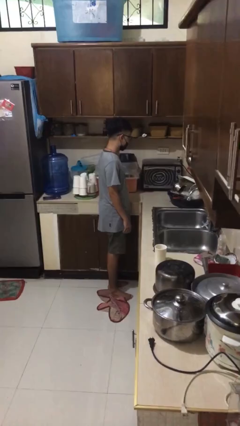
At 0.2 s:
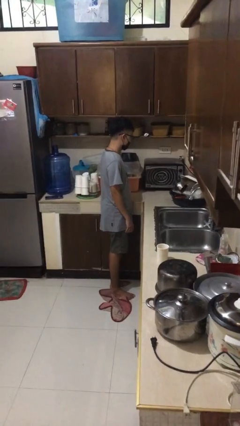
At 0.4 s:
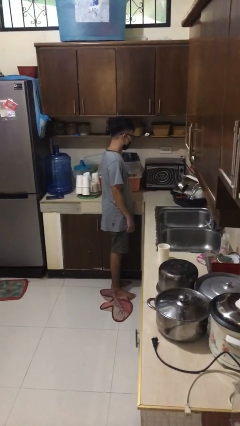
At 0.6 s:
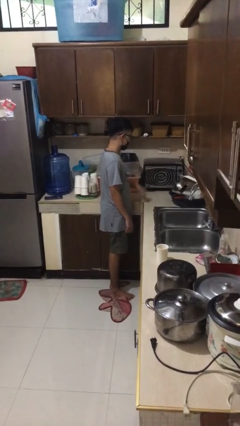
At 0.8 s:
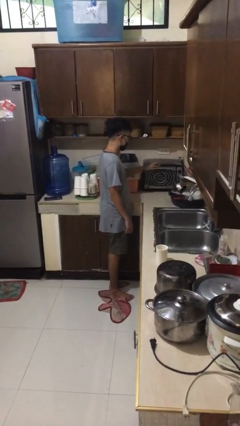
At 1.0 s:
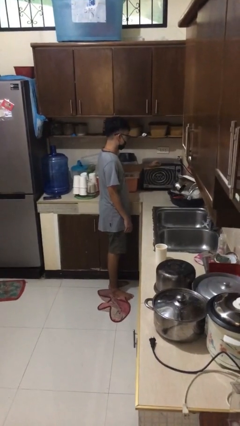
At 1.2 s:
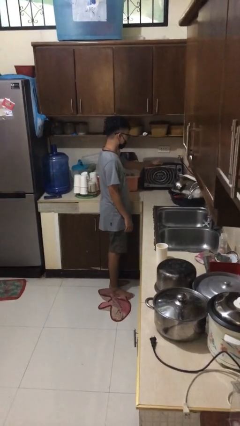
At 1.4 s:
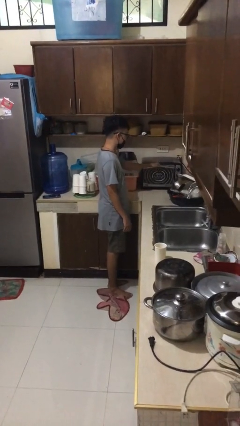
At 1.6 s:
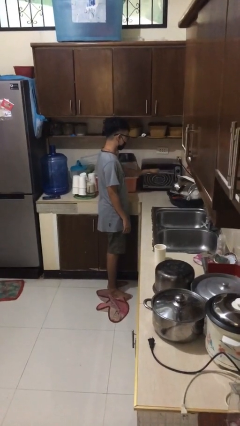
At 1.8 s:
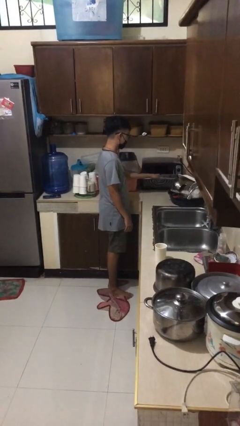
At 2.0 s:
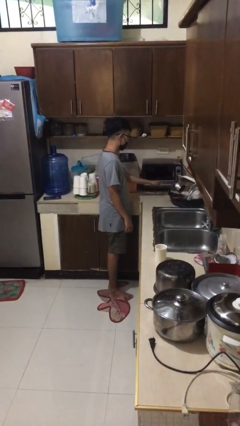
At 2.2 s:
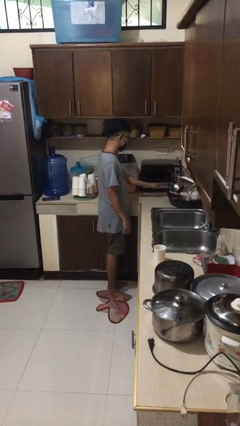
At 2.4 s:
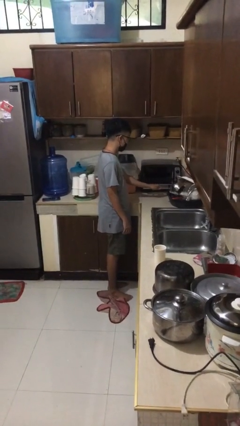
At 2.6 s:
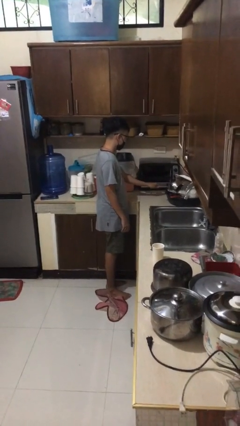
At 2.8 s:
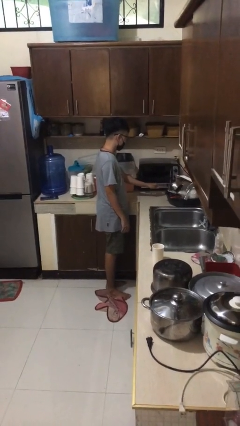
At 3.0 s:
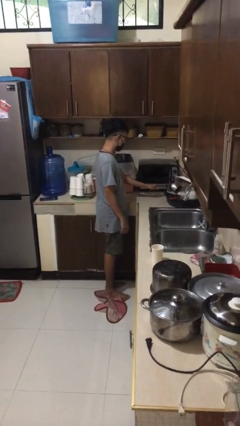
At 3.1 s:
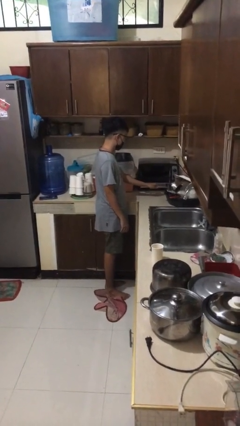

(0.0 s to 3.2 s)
person opens microwave

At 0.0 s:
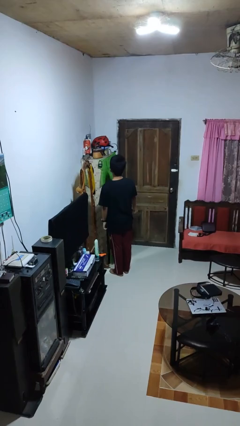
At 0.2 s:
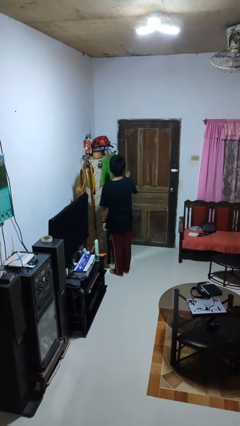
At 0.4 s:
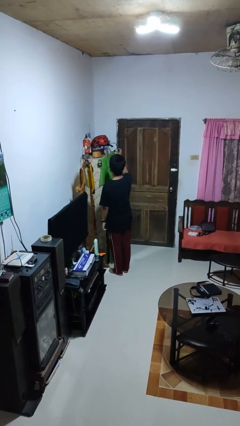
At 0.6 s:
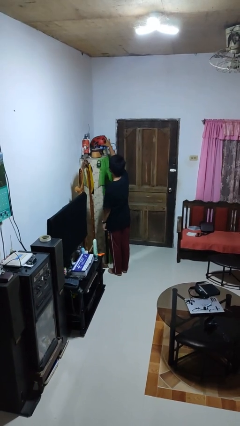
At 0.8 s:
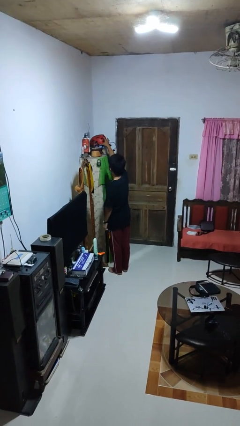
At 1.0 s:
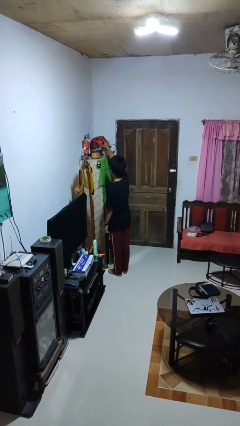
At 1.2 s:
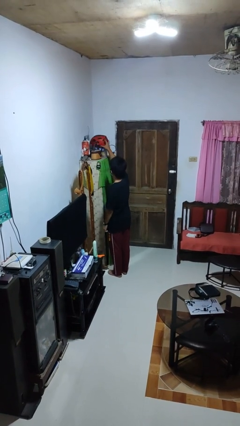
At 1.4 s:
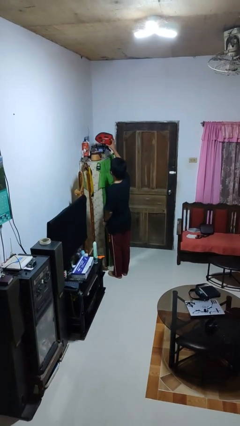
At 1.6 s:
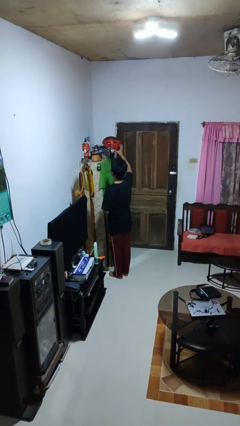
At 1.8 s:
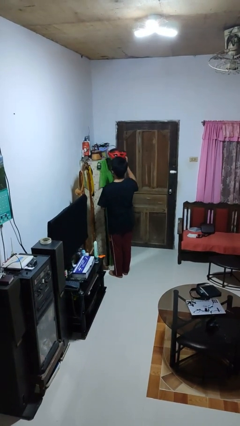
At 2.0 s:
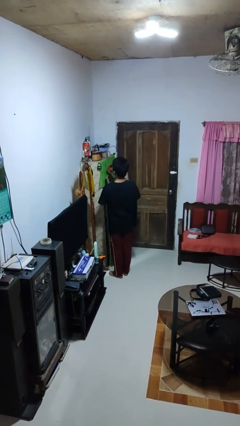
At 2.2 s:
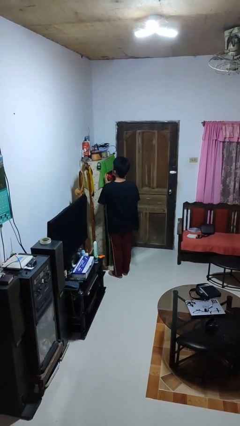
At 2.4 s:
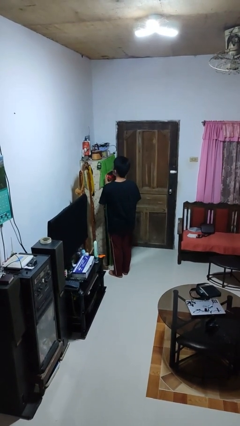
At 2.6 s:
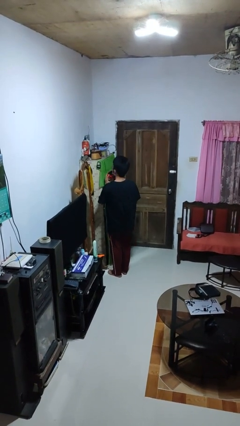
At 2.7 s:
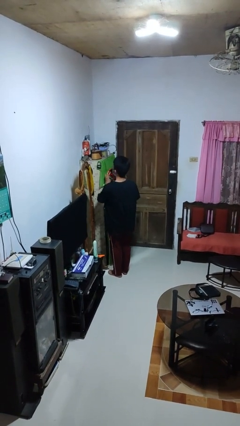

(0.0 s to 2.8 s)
person picks up object from shelf

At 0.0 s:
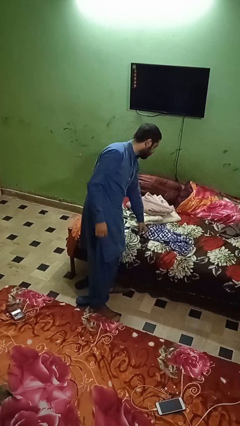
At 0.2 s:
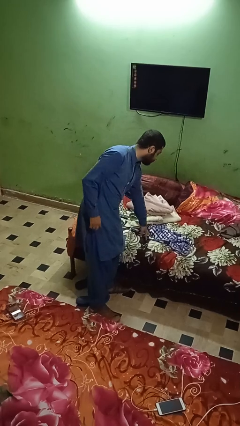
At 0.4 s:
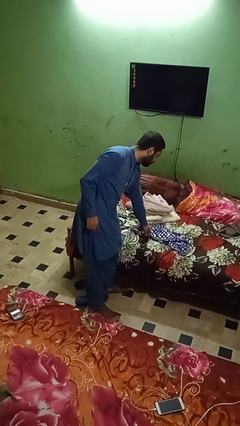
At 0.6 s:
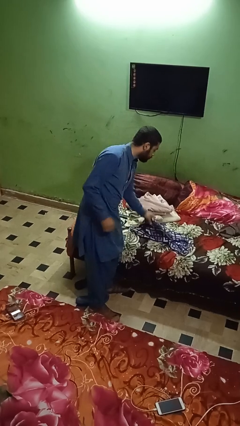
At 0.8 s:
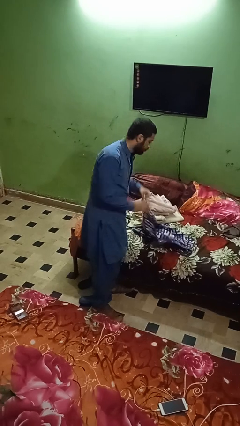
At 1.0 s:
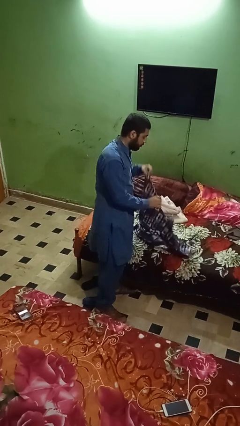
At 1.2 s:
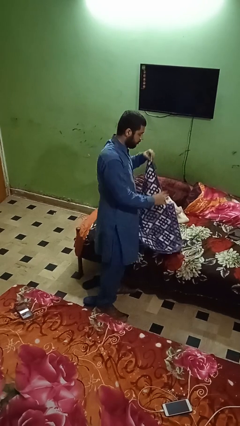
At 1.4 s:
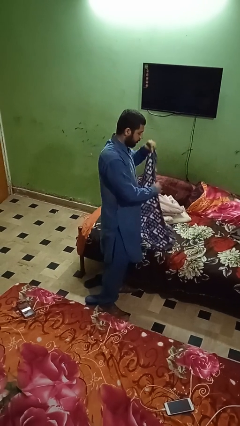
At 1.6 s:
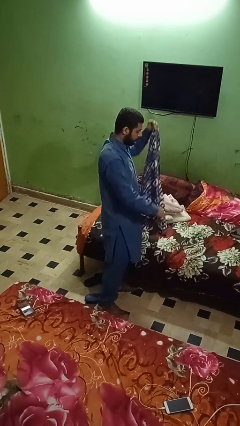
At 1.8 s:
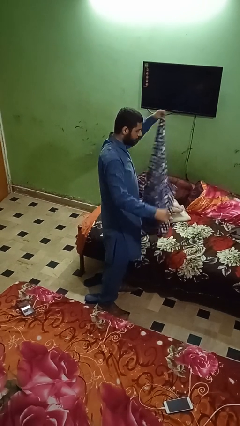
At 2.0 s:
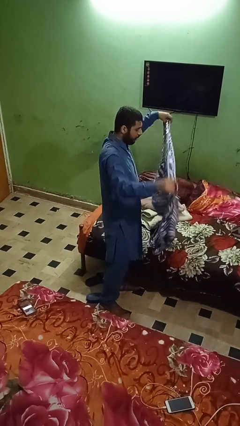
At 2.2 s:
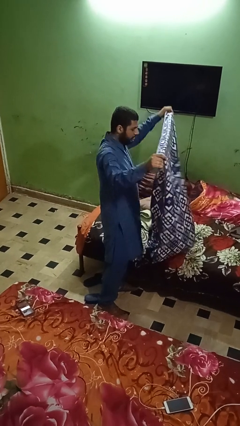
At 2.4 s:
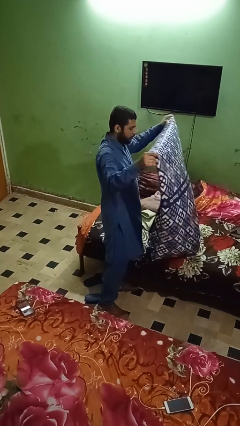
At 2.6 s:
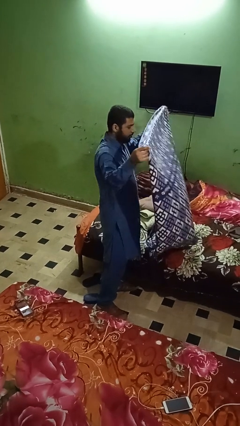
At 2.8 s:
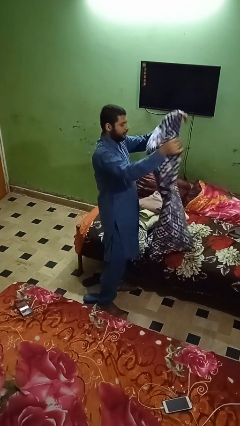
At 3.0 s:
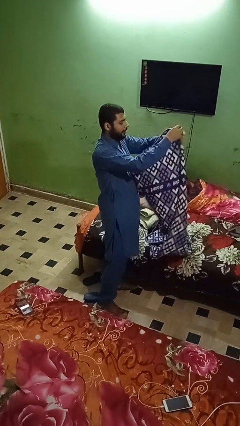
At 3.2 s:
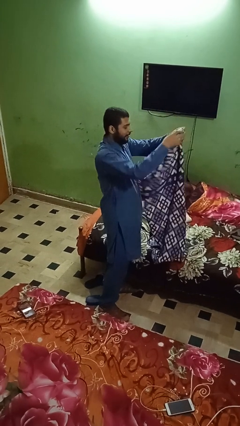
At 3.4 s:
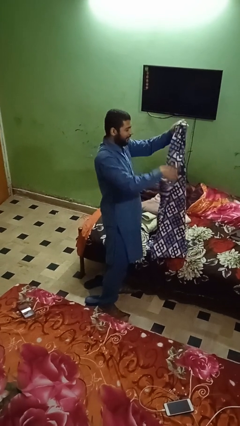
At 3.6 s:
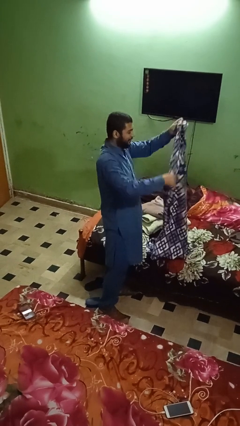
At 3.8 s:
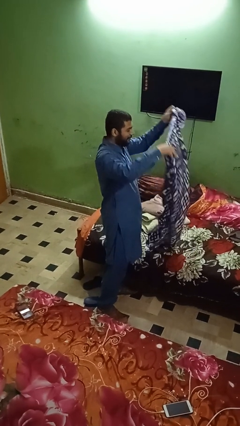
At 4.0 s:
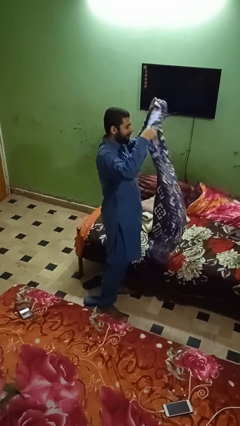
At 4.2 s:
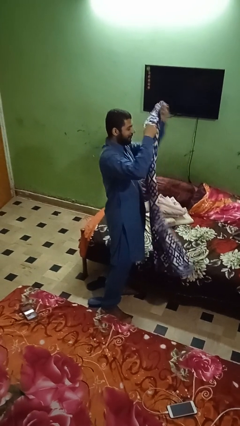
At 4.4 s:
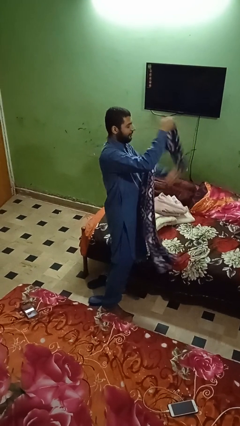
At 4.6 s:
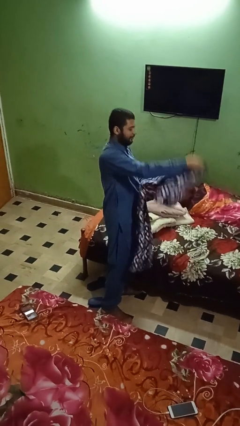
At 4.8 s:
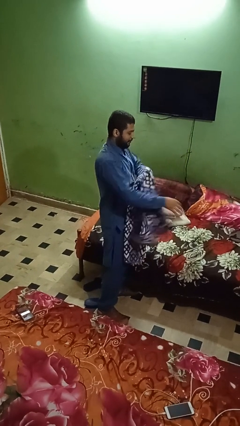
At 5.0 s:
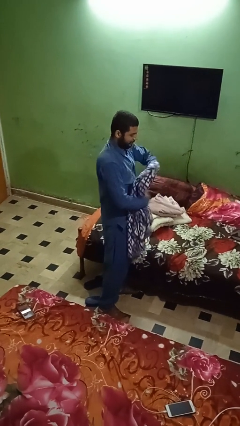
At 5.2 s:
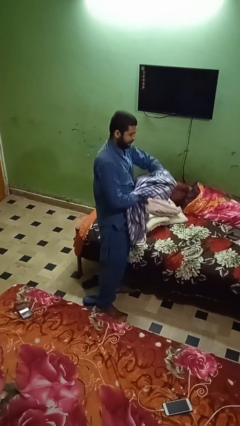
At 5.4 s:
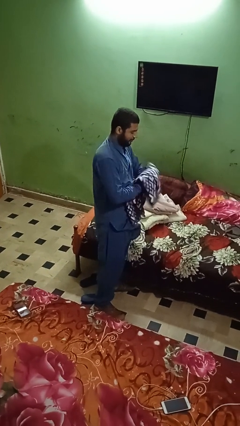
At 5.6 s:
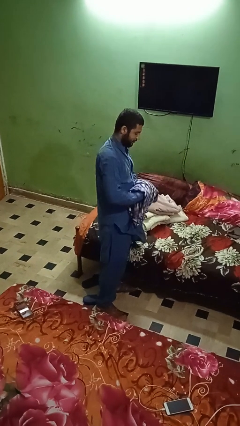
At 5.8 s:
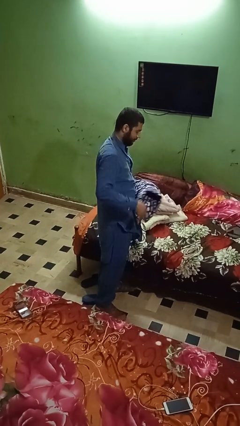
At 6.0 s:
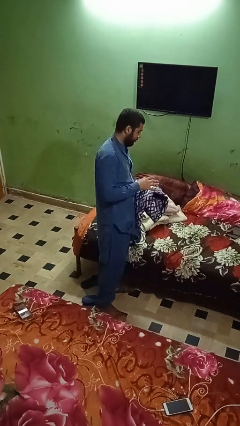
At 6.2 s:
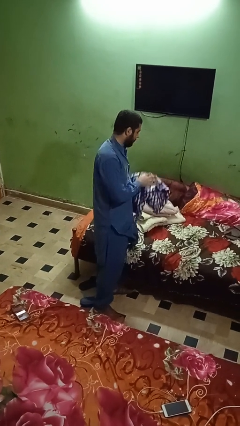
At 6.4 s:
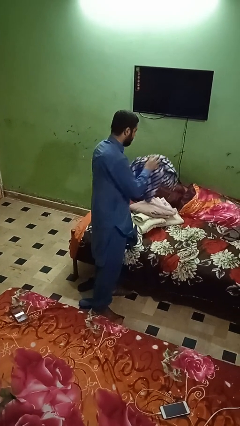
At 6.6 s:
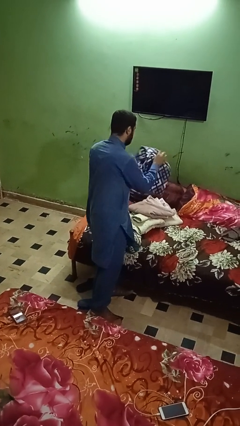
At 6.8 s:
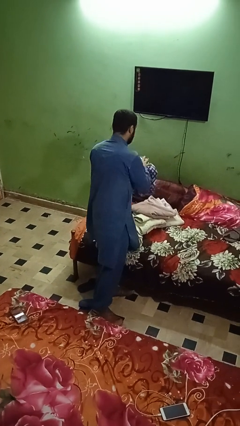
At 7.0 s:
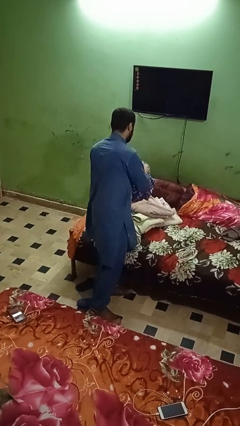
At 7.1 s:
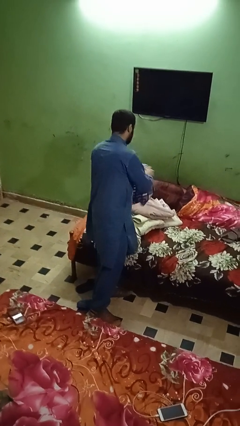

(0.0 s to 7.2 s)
person folds towel

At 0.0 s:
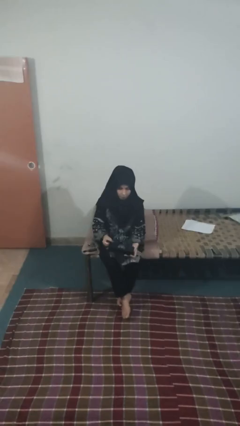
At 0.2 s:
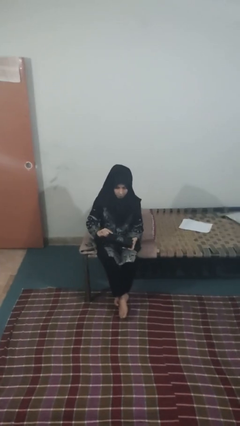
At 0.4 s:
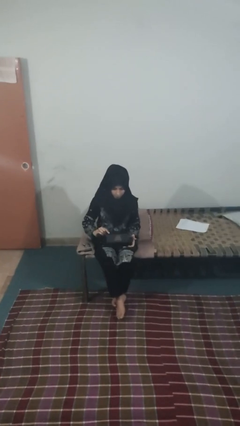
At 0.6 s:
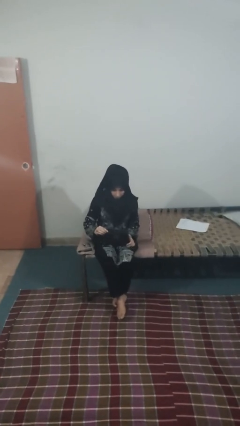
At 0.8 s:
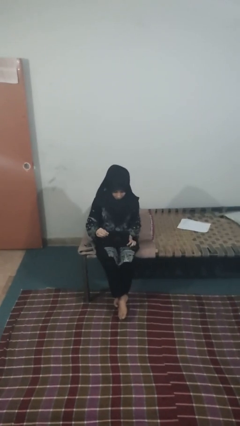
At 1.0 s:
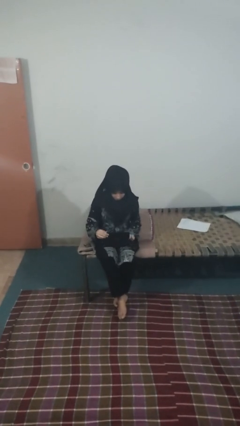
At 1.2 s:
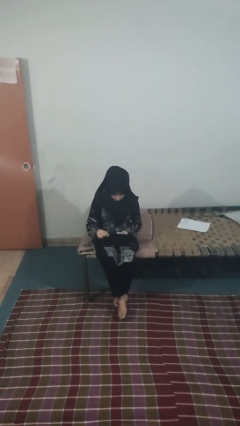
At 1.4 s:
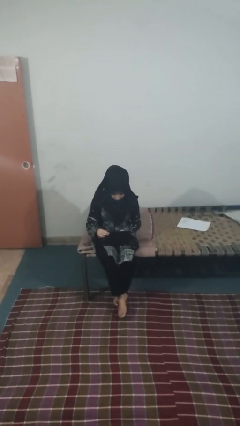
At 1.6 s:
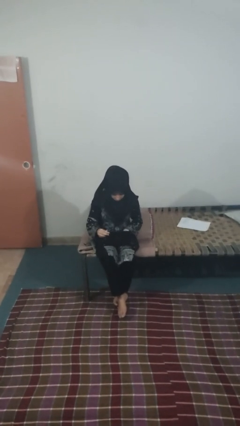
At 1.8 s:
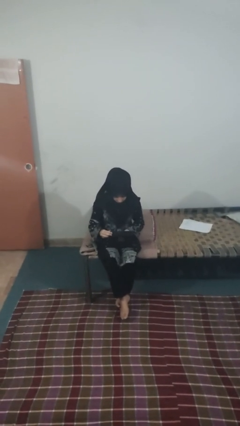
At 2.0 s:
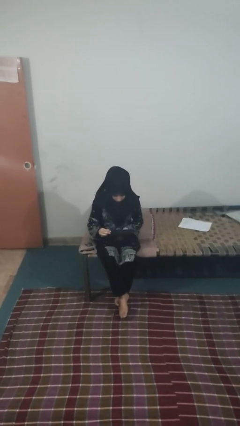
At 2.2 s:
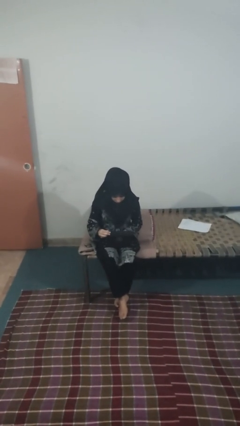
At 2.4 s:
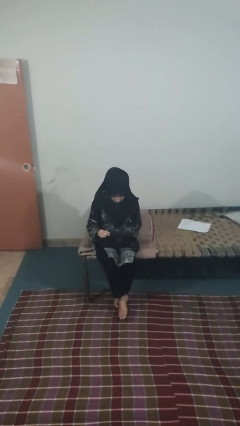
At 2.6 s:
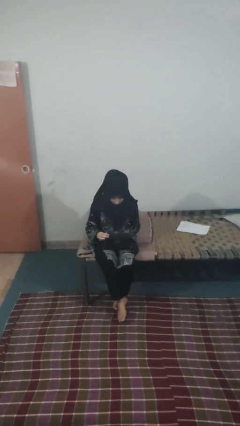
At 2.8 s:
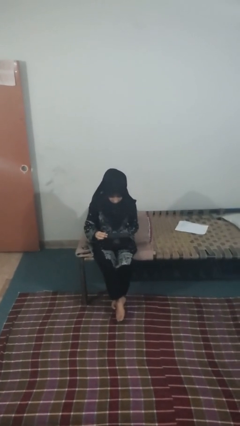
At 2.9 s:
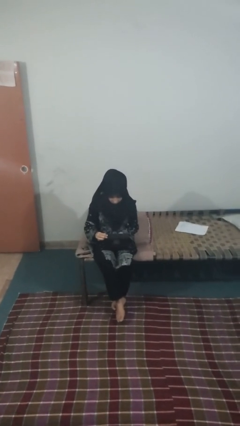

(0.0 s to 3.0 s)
person opens jewelry box

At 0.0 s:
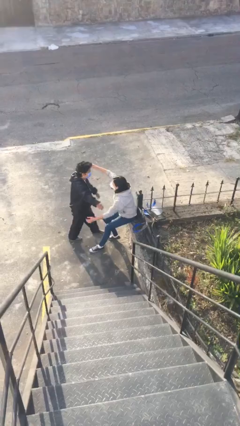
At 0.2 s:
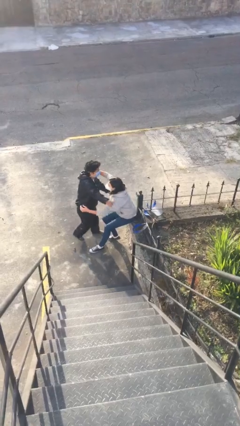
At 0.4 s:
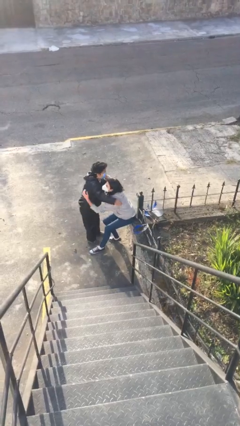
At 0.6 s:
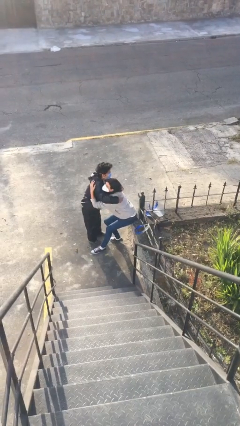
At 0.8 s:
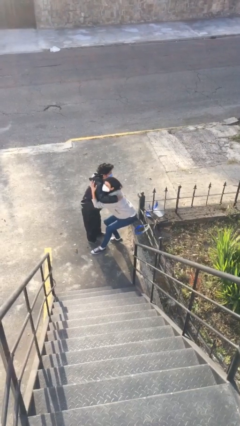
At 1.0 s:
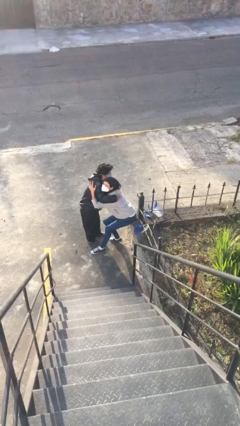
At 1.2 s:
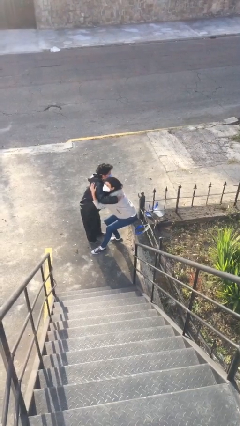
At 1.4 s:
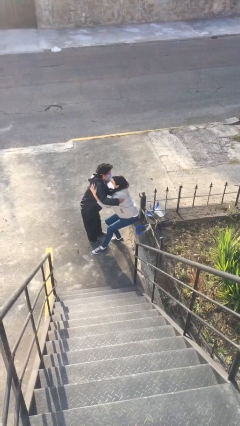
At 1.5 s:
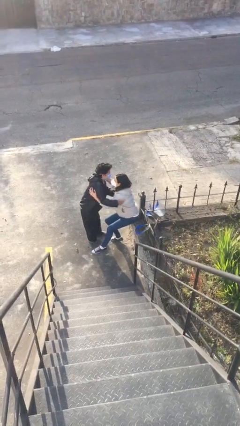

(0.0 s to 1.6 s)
person embraces person
